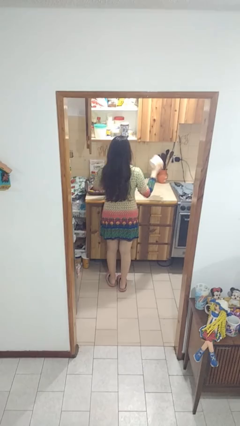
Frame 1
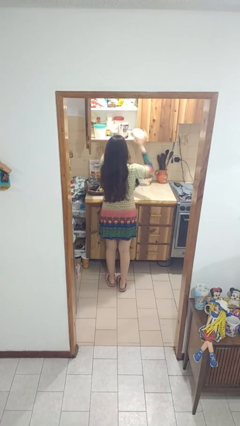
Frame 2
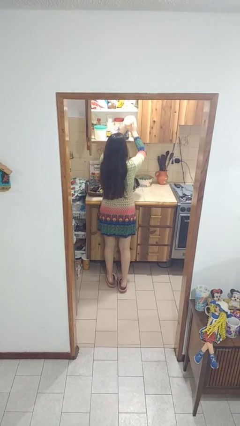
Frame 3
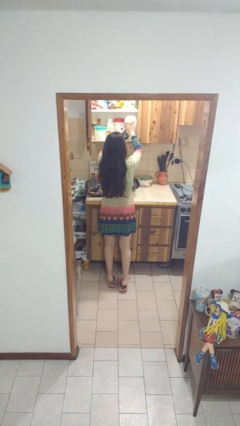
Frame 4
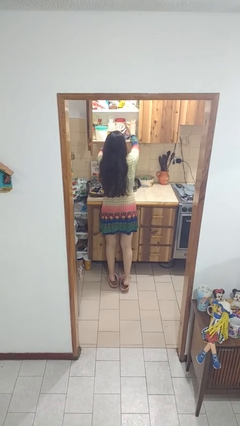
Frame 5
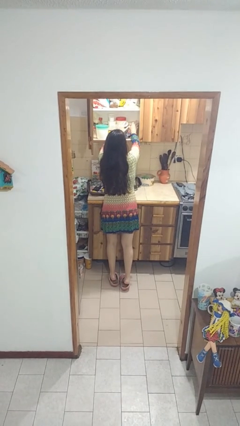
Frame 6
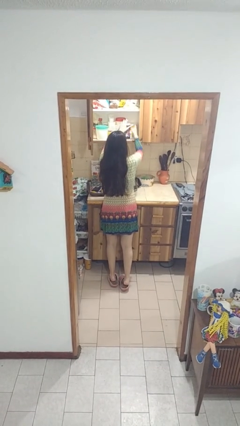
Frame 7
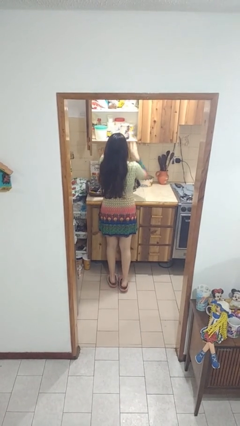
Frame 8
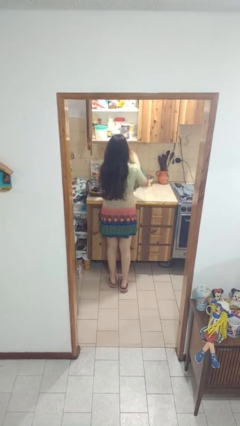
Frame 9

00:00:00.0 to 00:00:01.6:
person puts object in cabinet

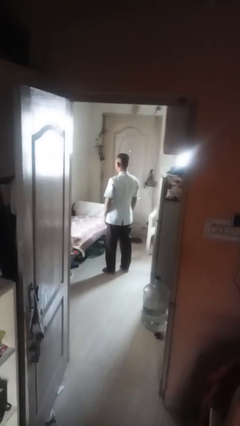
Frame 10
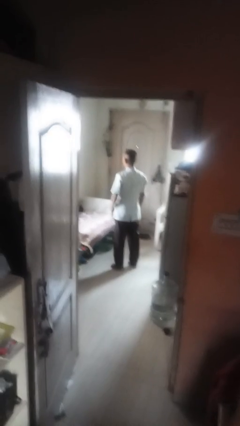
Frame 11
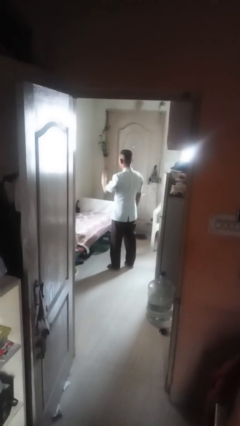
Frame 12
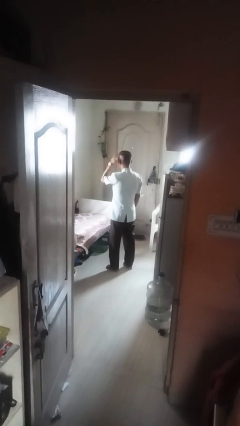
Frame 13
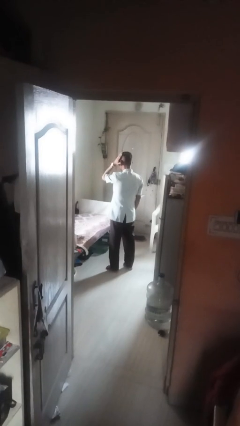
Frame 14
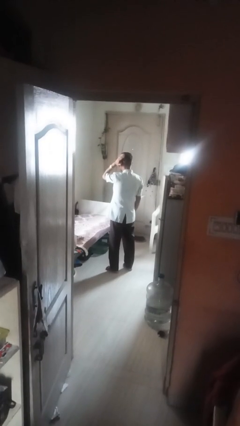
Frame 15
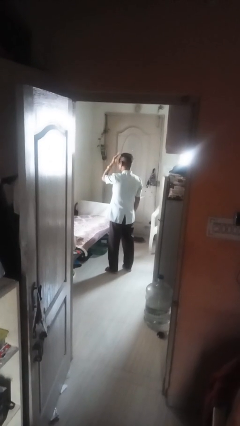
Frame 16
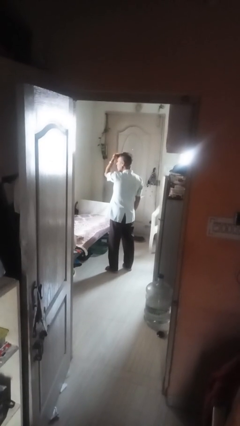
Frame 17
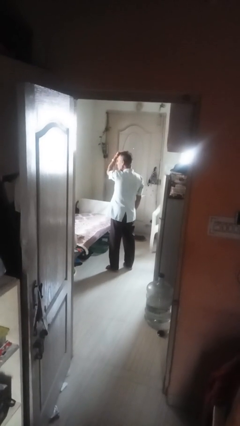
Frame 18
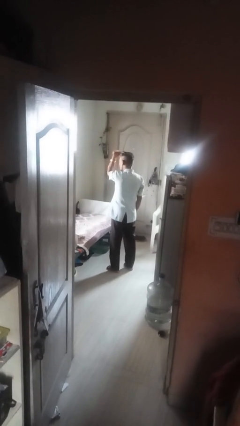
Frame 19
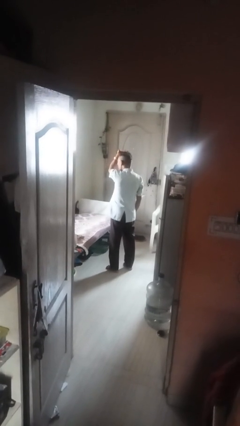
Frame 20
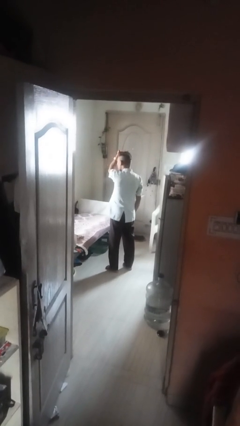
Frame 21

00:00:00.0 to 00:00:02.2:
person strokes hair

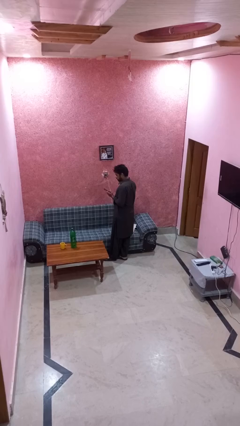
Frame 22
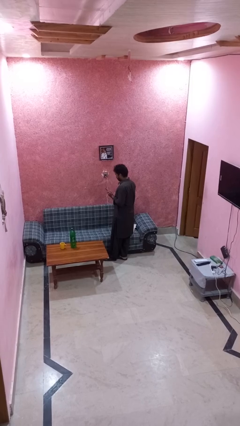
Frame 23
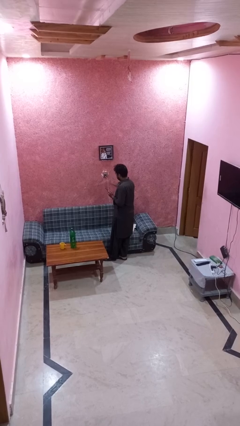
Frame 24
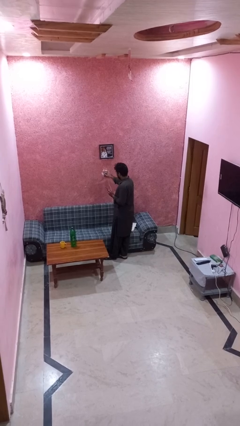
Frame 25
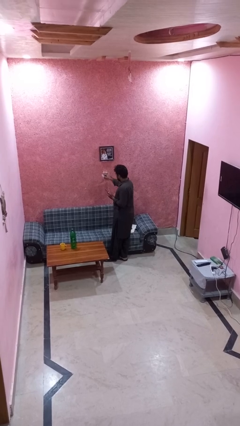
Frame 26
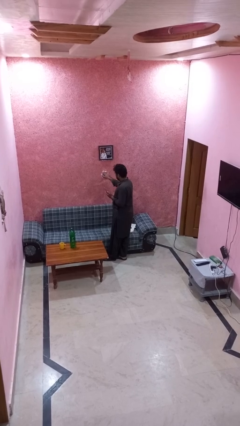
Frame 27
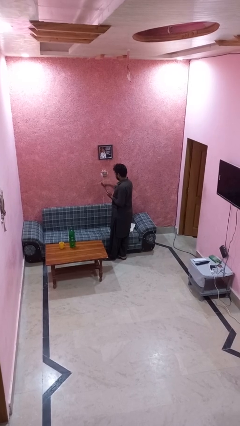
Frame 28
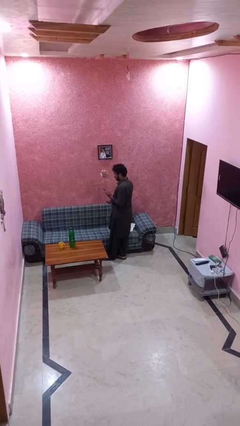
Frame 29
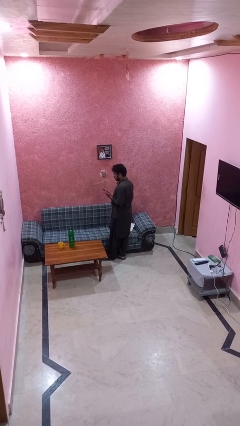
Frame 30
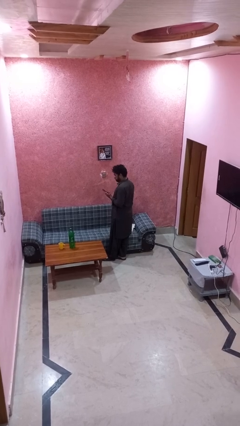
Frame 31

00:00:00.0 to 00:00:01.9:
person unplugs from electrical socket

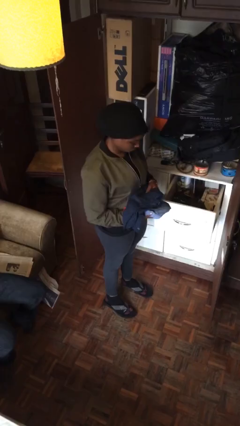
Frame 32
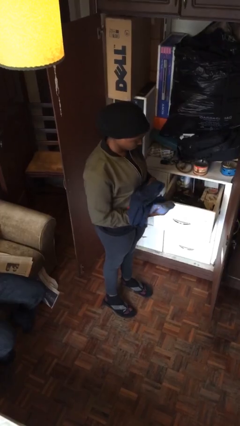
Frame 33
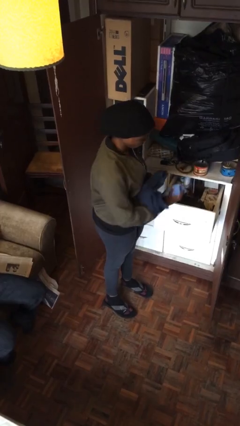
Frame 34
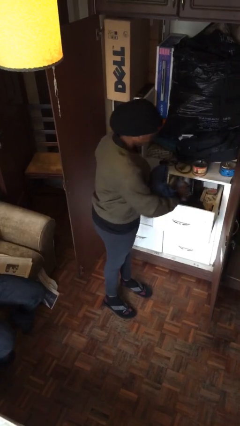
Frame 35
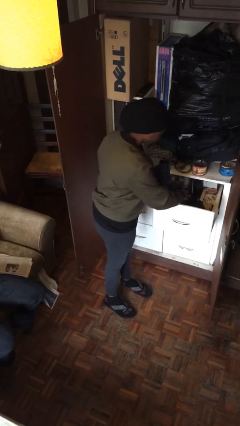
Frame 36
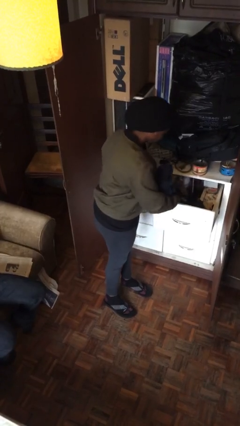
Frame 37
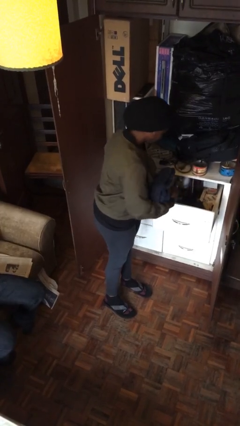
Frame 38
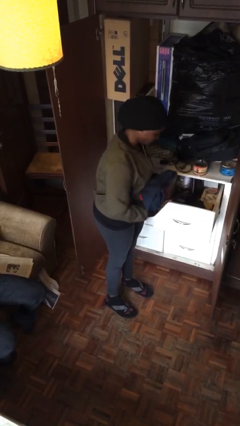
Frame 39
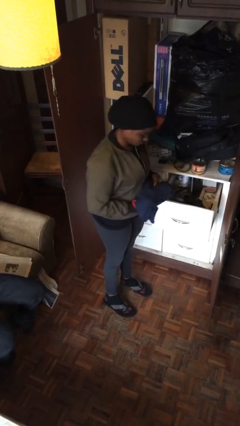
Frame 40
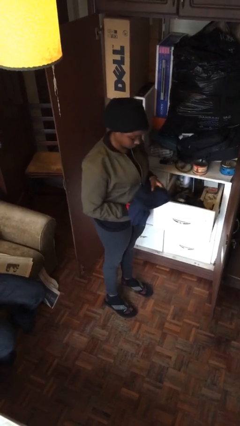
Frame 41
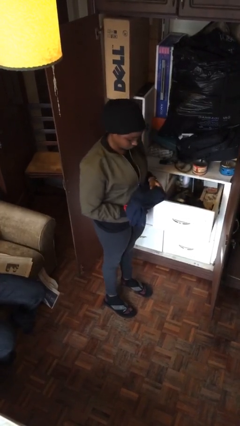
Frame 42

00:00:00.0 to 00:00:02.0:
person puts clothes into dresser

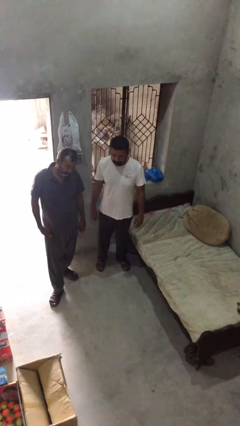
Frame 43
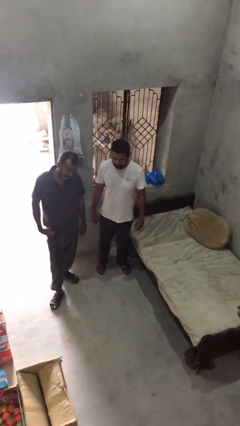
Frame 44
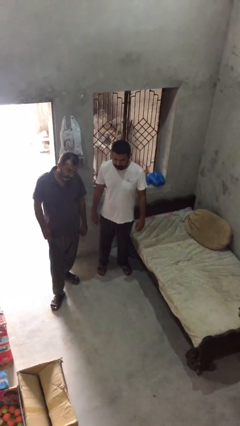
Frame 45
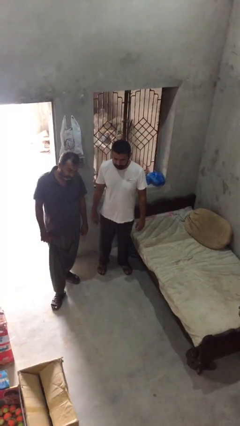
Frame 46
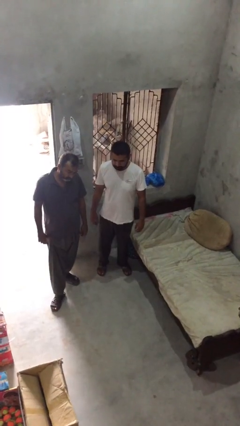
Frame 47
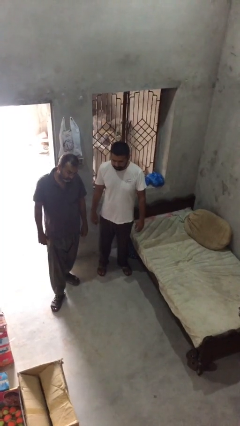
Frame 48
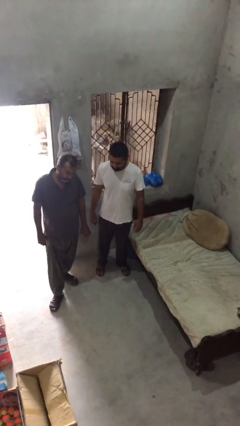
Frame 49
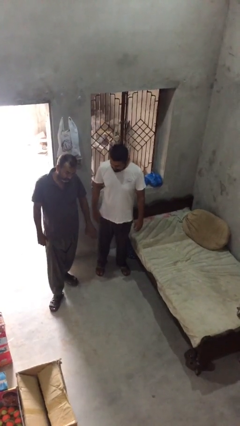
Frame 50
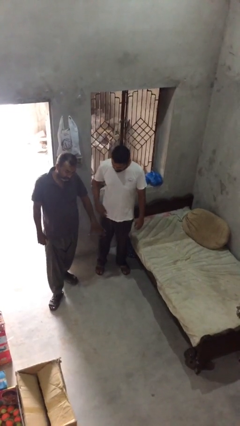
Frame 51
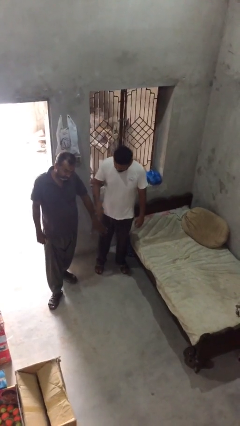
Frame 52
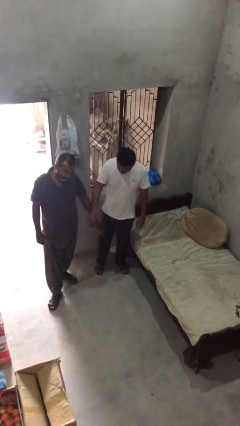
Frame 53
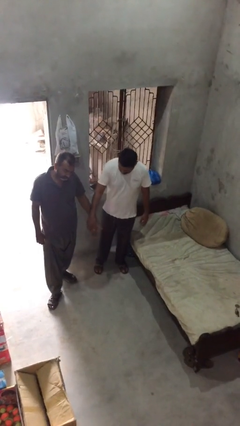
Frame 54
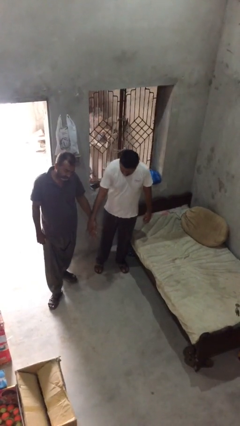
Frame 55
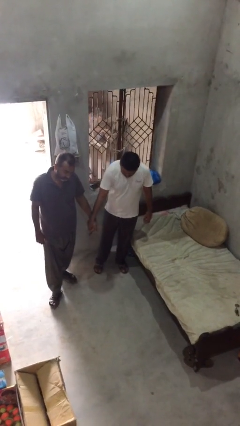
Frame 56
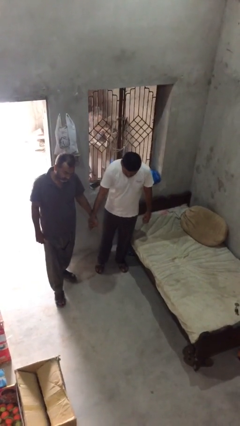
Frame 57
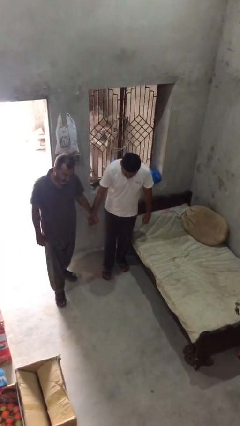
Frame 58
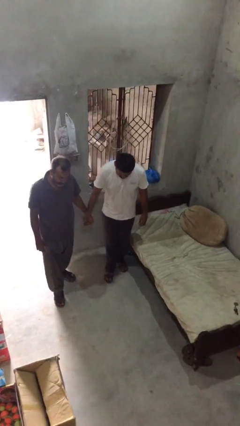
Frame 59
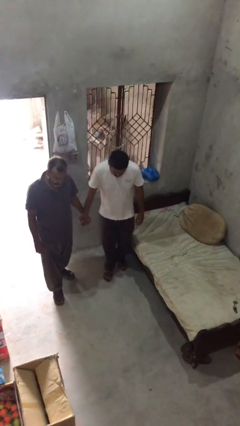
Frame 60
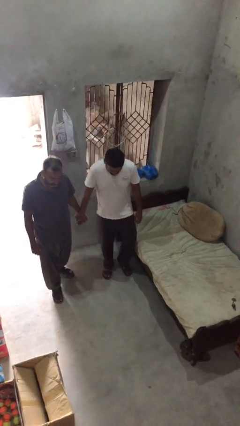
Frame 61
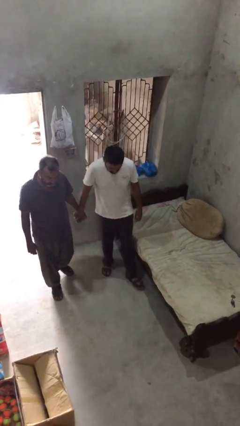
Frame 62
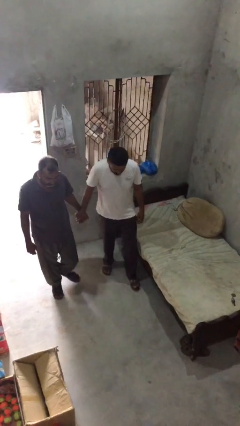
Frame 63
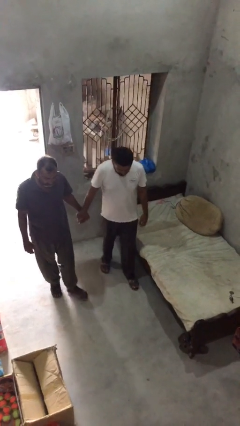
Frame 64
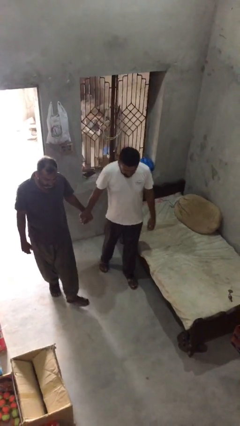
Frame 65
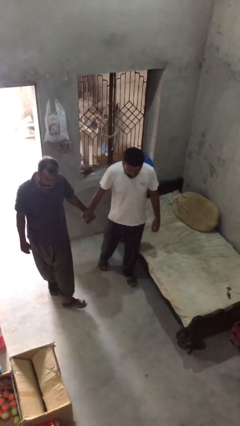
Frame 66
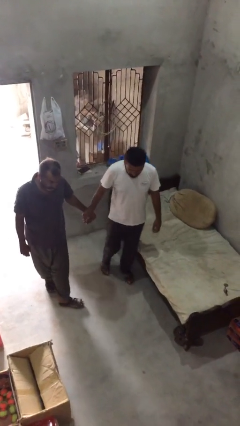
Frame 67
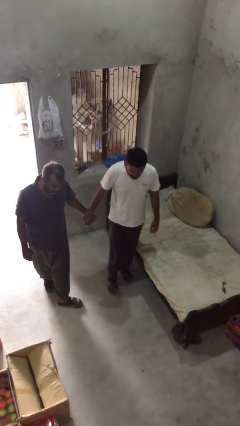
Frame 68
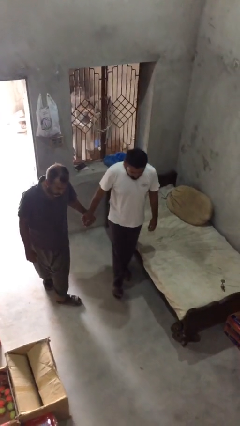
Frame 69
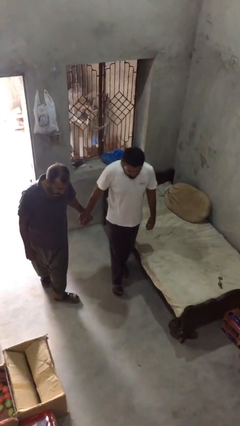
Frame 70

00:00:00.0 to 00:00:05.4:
person holds hand

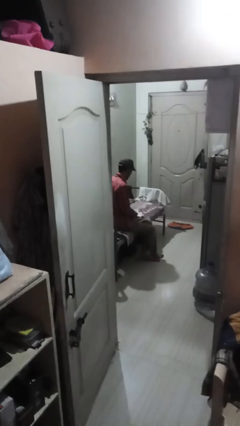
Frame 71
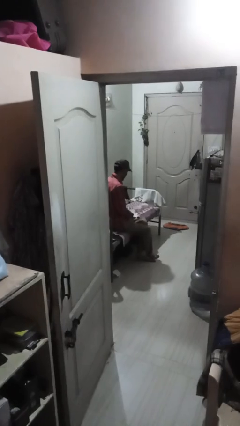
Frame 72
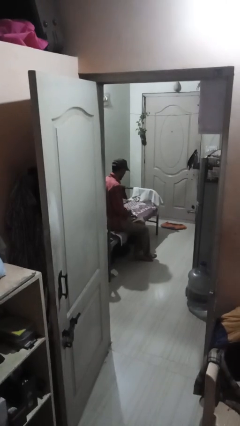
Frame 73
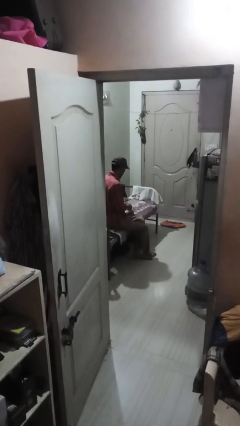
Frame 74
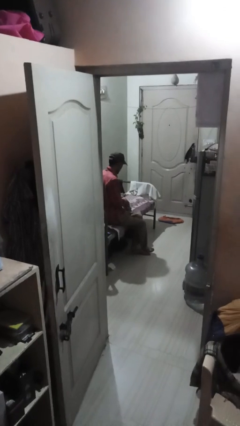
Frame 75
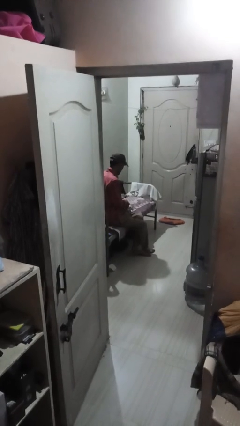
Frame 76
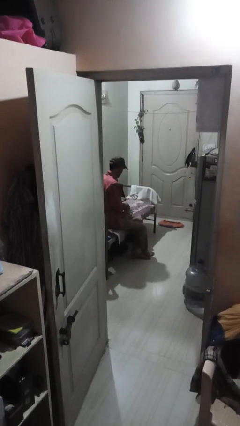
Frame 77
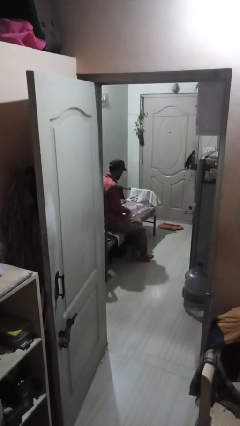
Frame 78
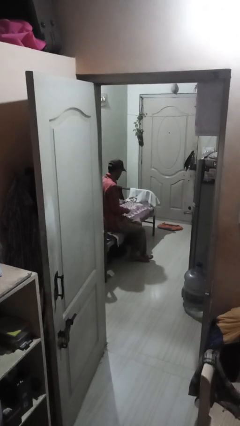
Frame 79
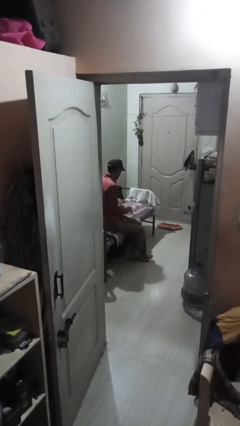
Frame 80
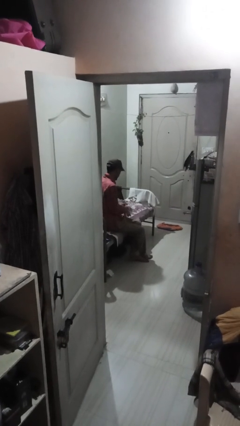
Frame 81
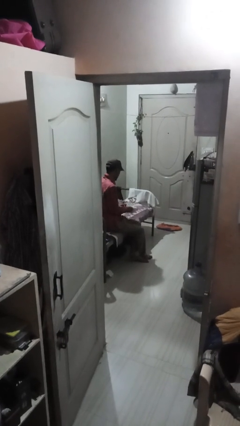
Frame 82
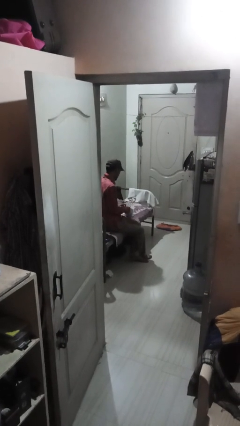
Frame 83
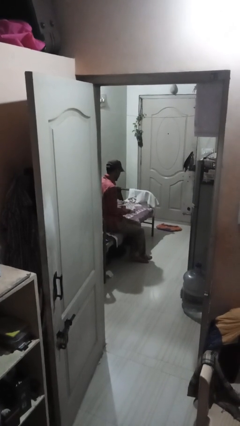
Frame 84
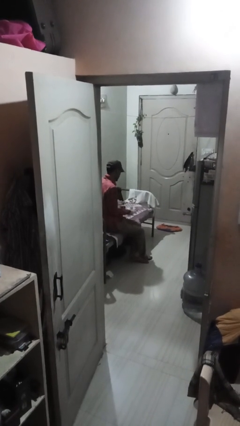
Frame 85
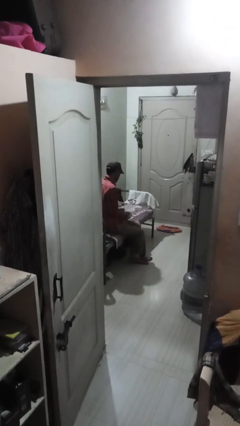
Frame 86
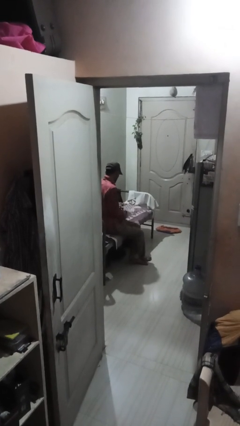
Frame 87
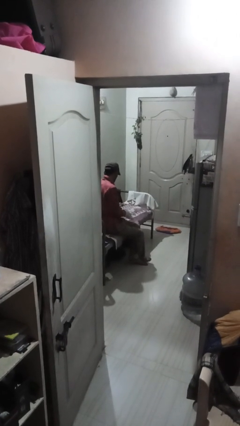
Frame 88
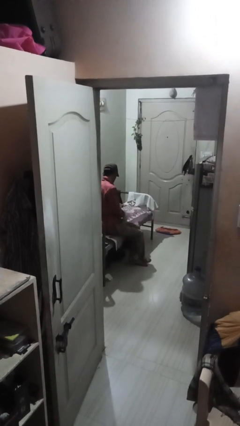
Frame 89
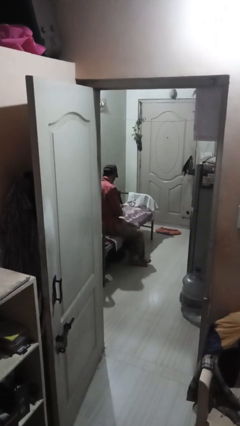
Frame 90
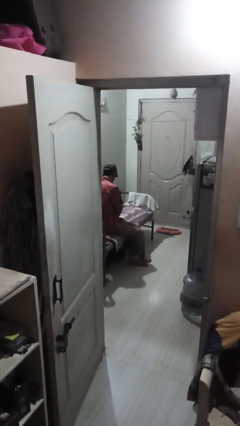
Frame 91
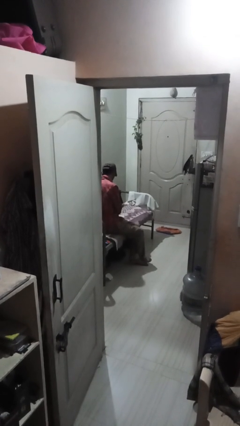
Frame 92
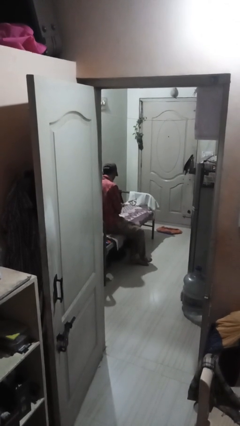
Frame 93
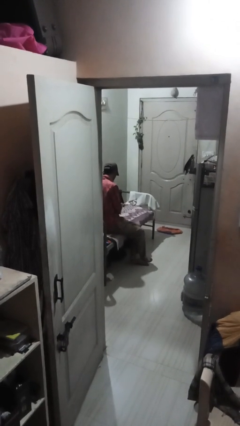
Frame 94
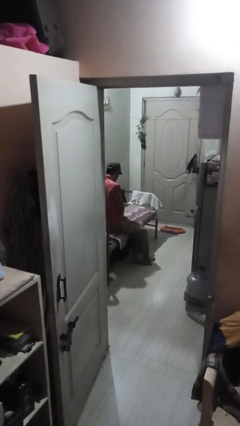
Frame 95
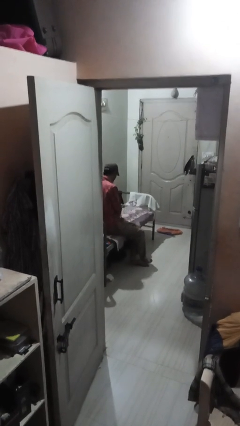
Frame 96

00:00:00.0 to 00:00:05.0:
person puts on gloves
